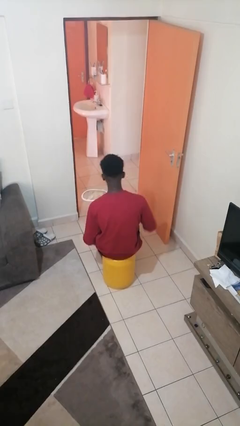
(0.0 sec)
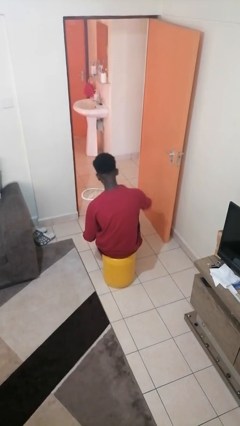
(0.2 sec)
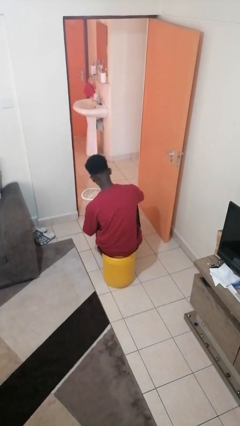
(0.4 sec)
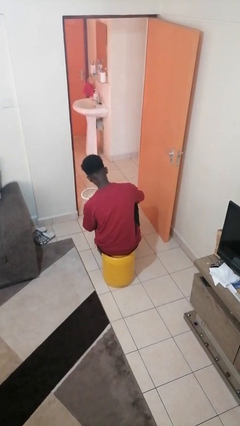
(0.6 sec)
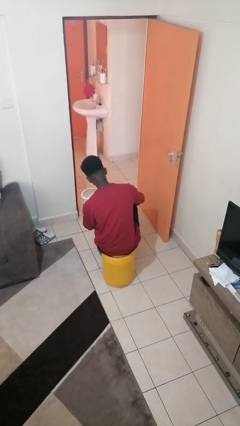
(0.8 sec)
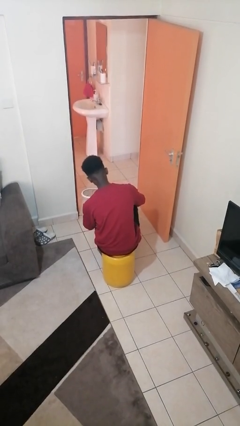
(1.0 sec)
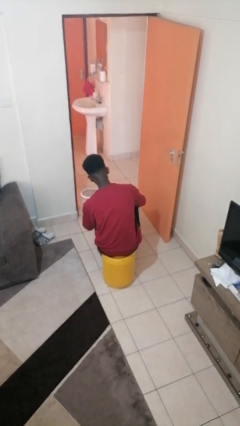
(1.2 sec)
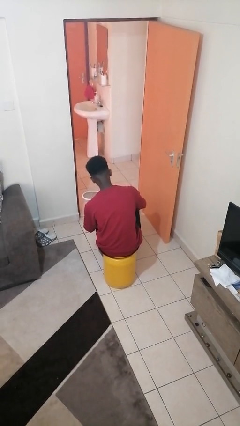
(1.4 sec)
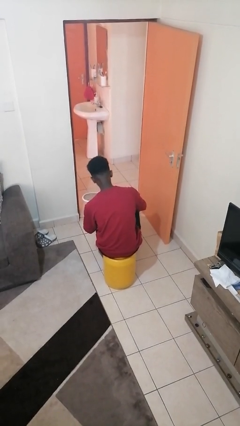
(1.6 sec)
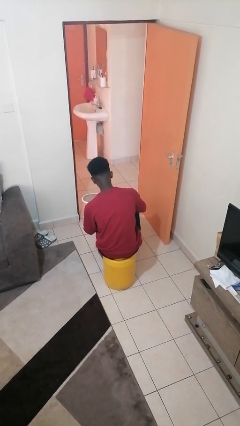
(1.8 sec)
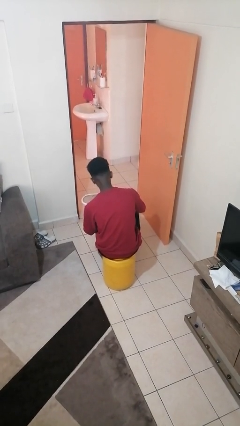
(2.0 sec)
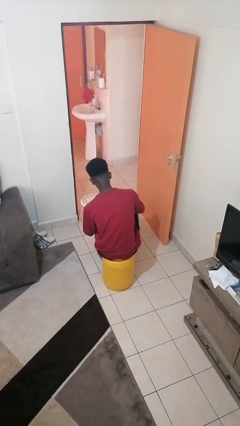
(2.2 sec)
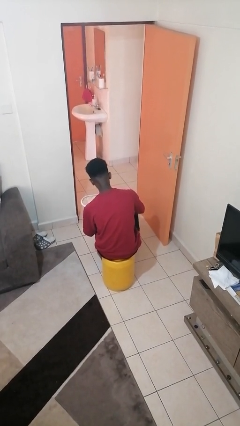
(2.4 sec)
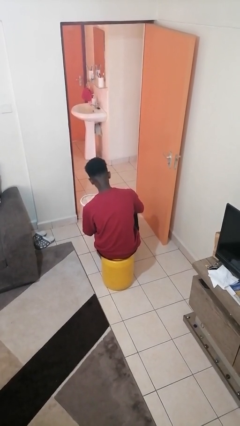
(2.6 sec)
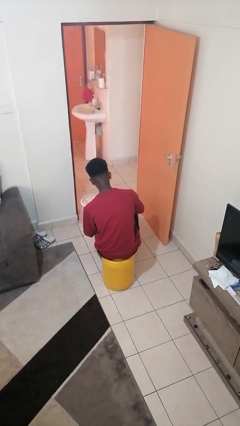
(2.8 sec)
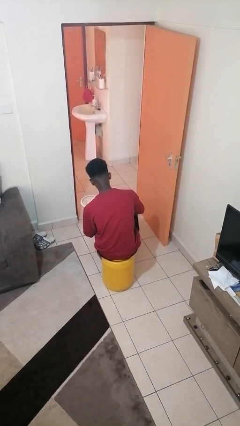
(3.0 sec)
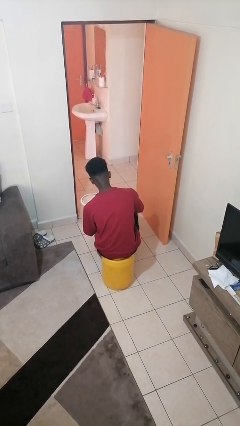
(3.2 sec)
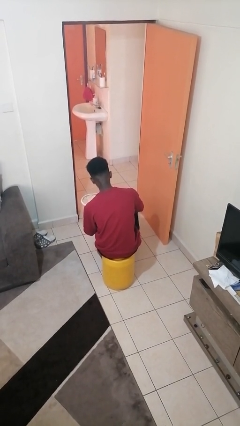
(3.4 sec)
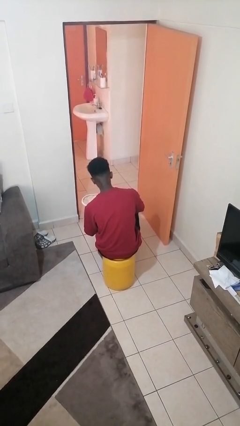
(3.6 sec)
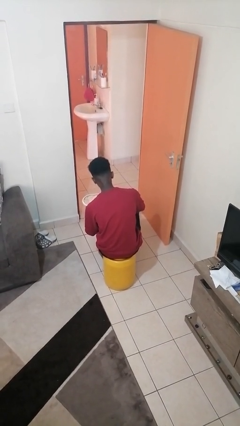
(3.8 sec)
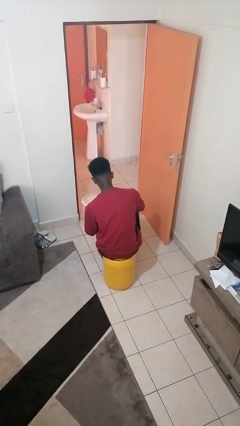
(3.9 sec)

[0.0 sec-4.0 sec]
person taps object with finger

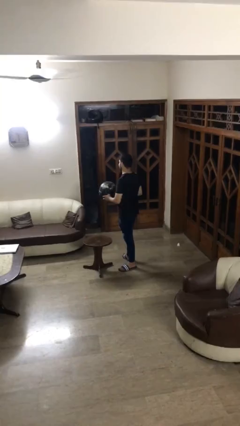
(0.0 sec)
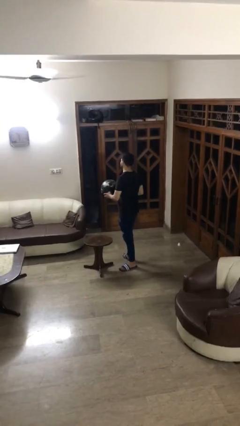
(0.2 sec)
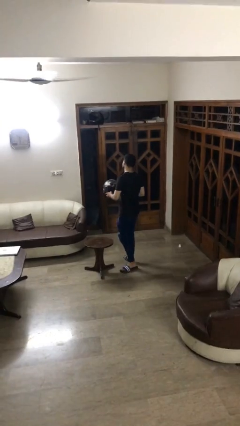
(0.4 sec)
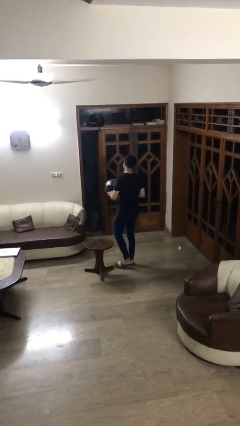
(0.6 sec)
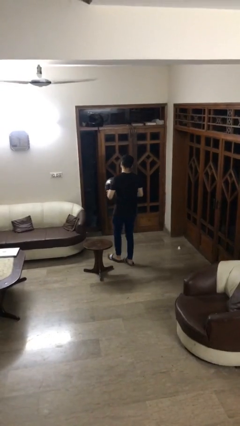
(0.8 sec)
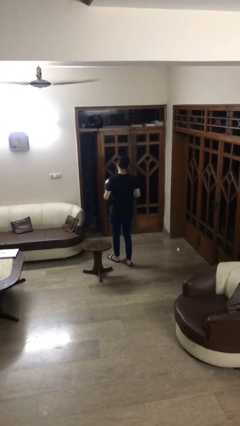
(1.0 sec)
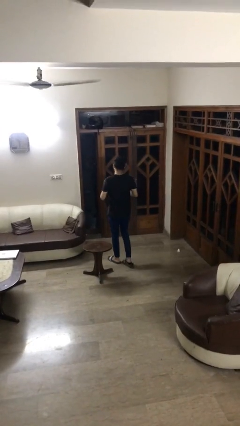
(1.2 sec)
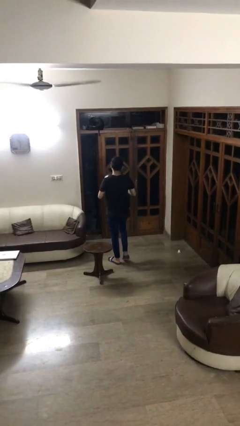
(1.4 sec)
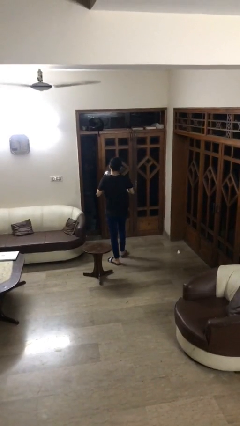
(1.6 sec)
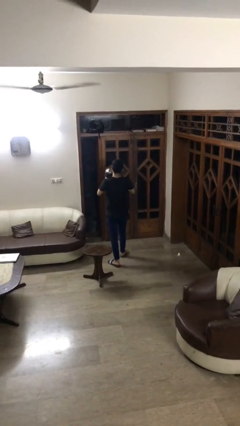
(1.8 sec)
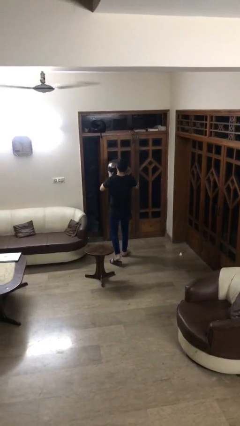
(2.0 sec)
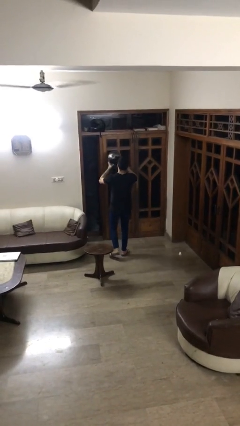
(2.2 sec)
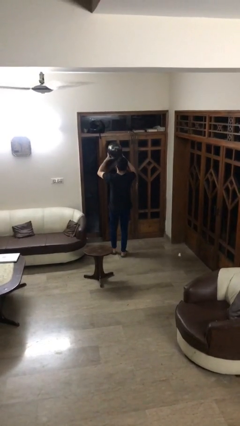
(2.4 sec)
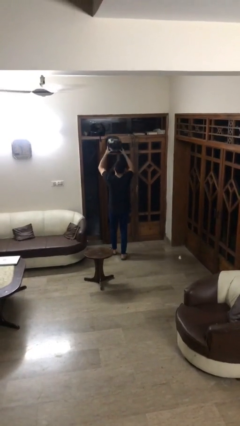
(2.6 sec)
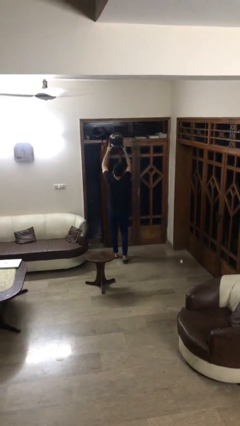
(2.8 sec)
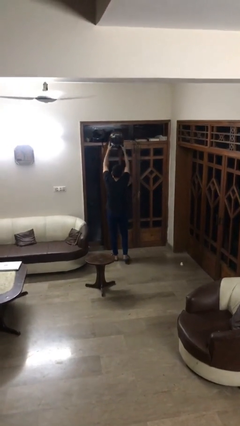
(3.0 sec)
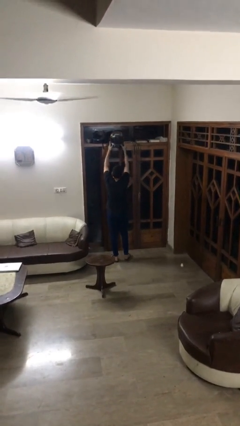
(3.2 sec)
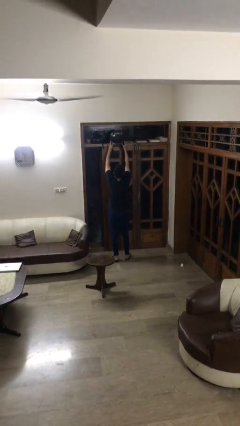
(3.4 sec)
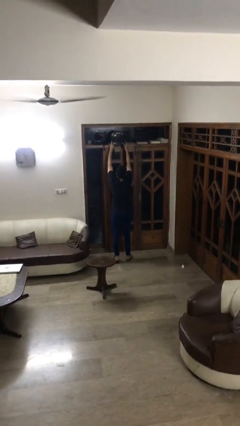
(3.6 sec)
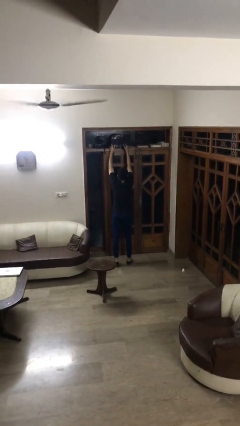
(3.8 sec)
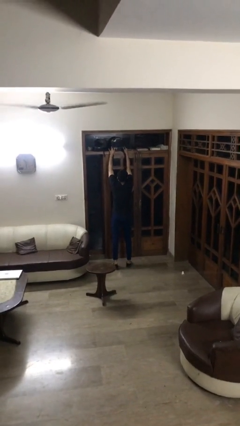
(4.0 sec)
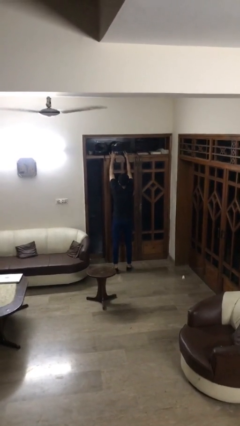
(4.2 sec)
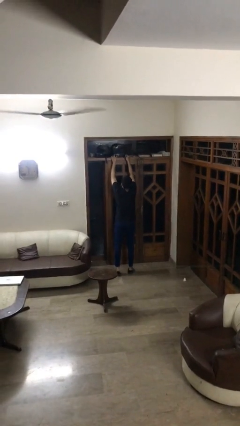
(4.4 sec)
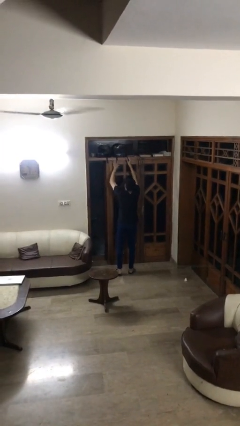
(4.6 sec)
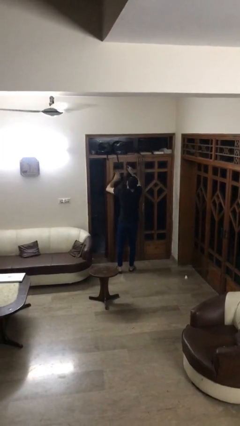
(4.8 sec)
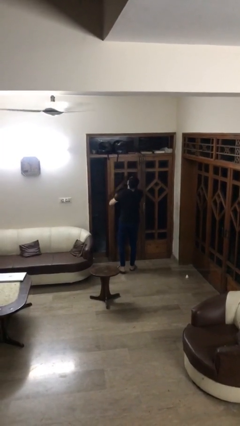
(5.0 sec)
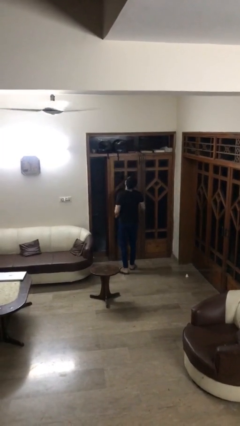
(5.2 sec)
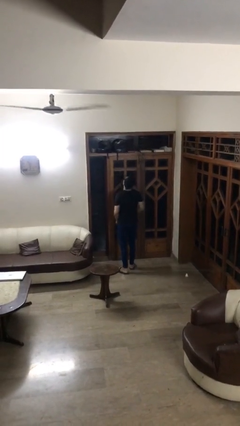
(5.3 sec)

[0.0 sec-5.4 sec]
person puts down object on shelf

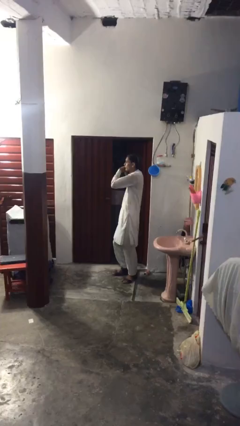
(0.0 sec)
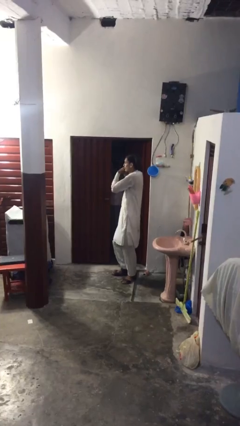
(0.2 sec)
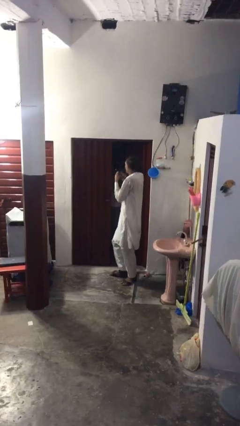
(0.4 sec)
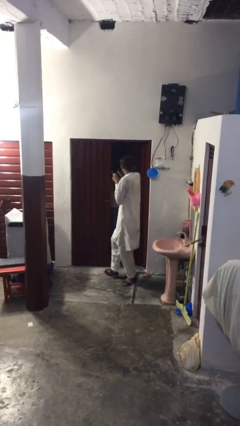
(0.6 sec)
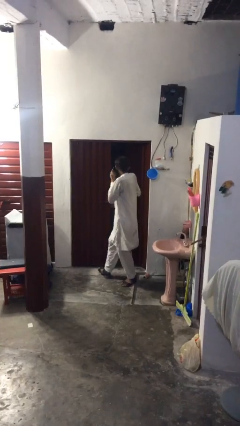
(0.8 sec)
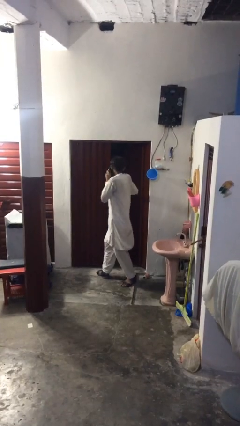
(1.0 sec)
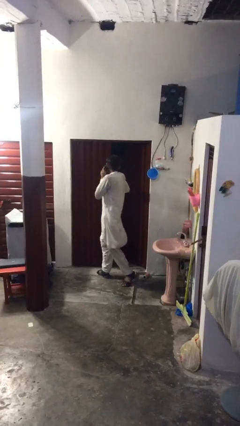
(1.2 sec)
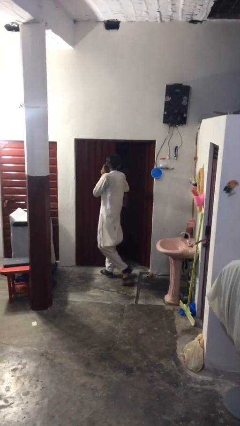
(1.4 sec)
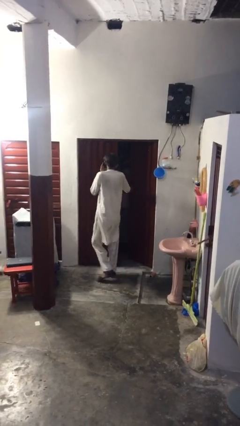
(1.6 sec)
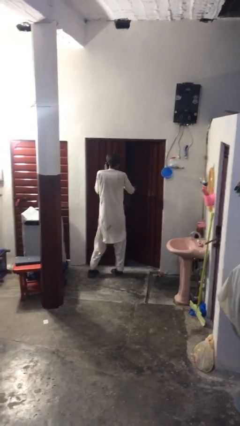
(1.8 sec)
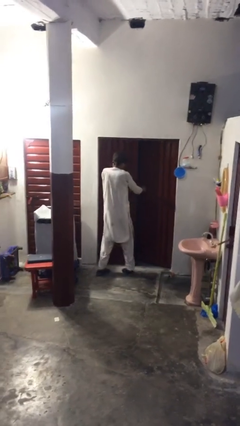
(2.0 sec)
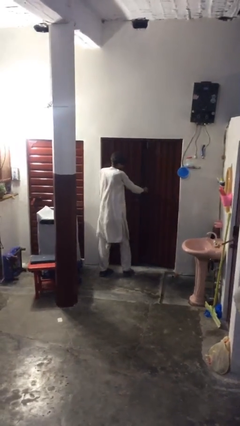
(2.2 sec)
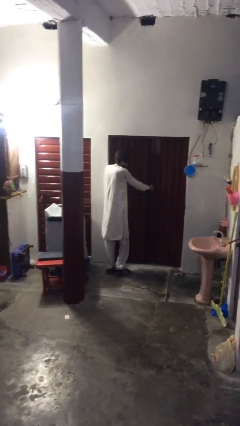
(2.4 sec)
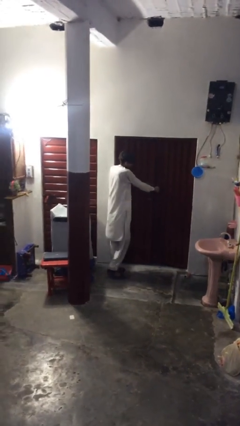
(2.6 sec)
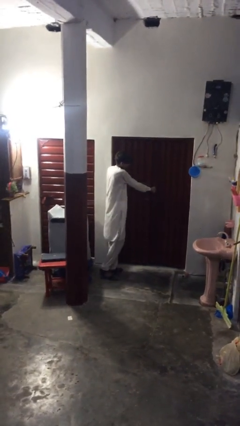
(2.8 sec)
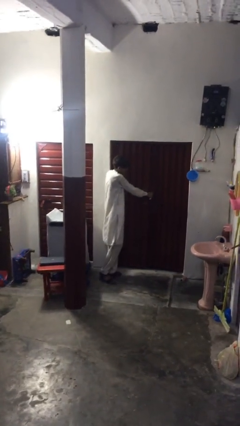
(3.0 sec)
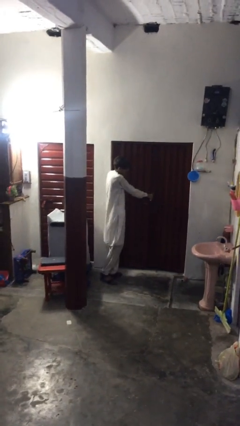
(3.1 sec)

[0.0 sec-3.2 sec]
person closes facility door

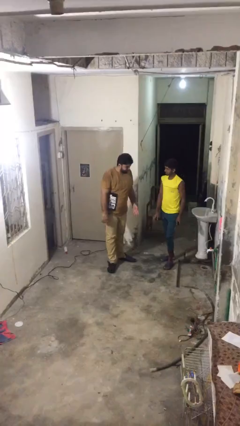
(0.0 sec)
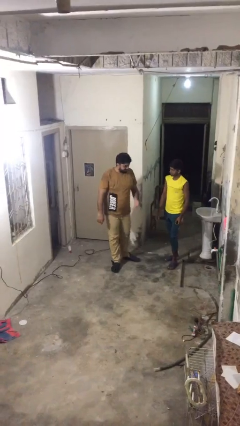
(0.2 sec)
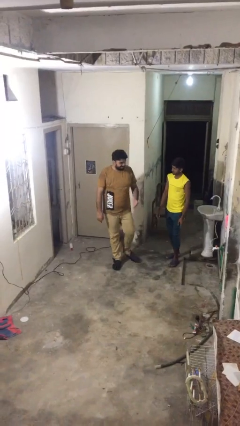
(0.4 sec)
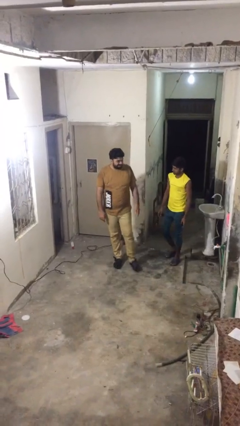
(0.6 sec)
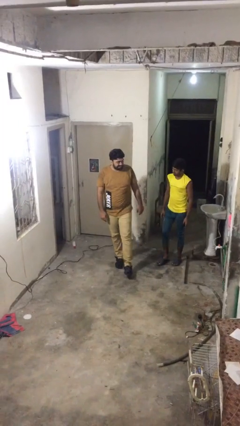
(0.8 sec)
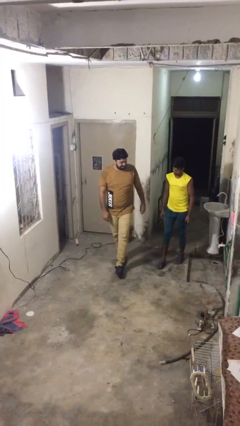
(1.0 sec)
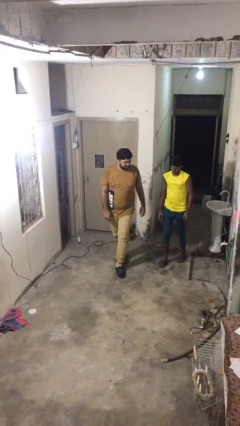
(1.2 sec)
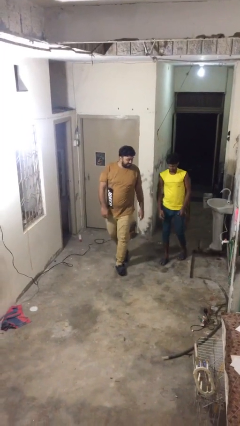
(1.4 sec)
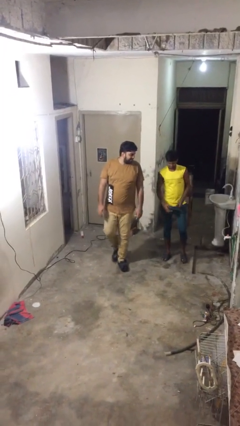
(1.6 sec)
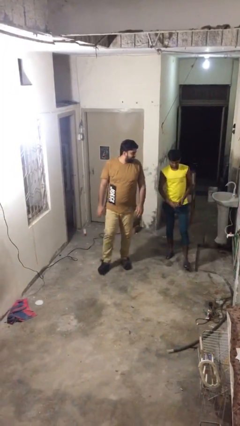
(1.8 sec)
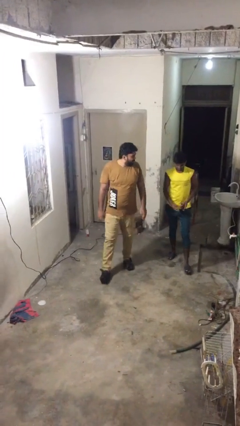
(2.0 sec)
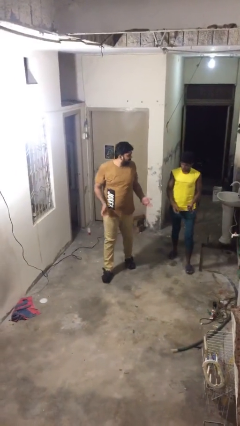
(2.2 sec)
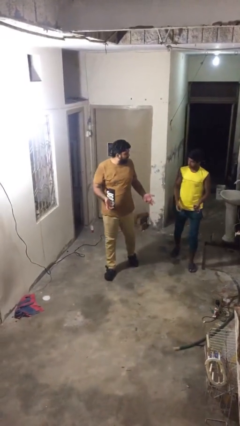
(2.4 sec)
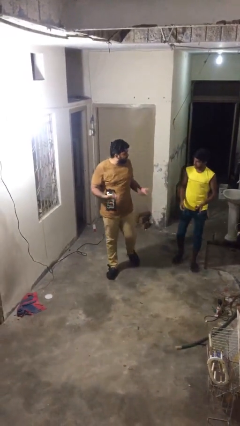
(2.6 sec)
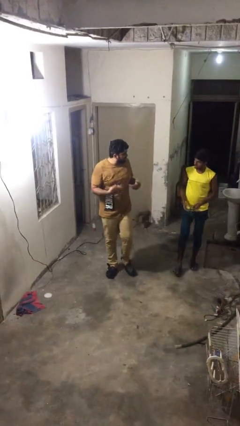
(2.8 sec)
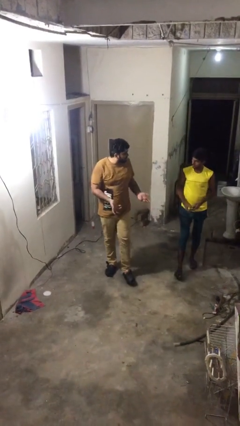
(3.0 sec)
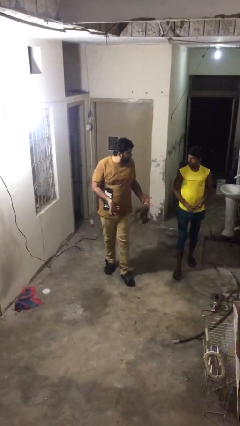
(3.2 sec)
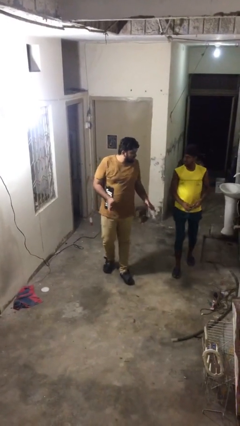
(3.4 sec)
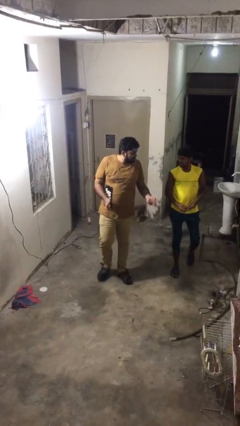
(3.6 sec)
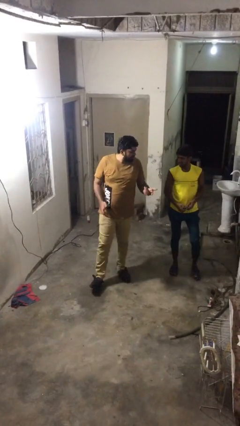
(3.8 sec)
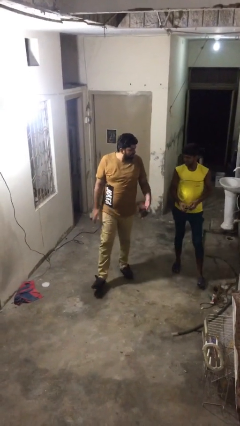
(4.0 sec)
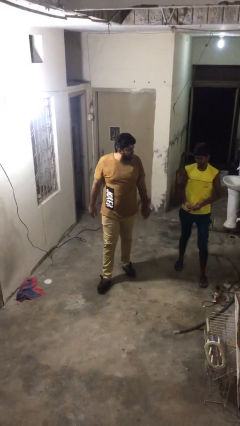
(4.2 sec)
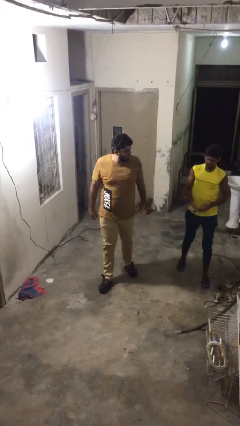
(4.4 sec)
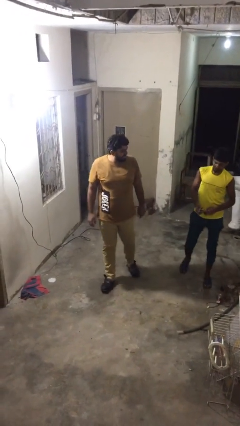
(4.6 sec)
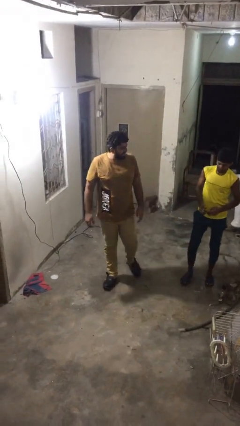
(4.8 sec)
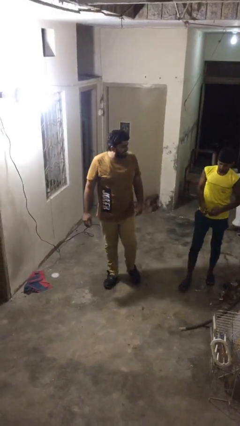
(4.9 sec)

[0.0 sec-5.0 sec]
person talks to person
